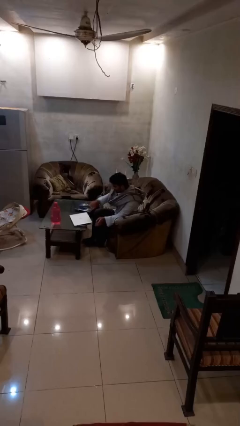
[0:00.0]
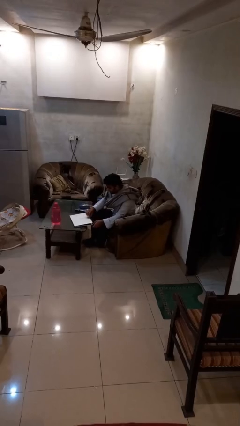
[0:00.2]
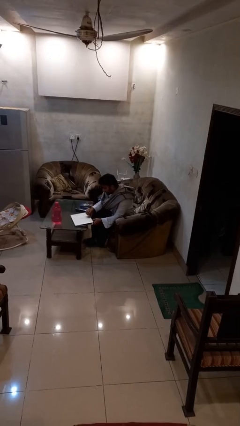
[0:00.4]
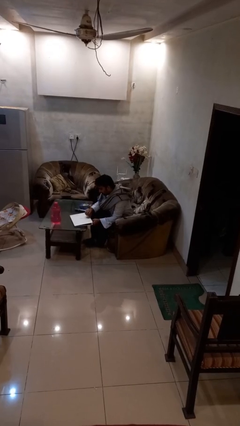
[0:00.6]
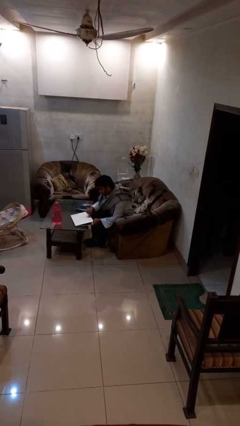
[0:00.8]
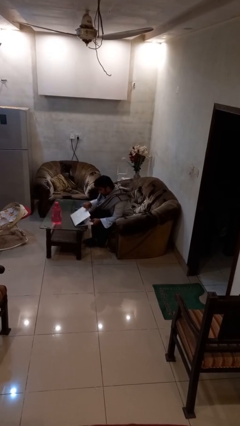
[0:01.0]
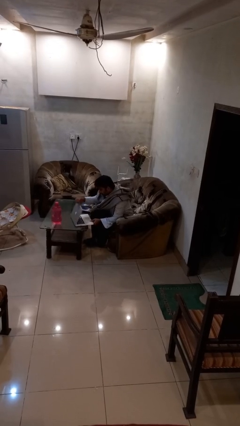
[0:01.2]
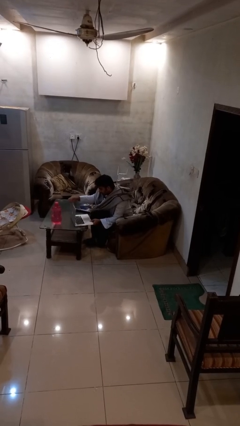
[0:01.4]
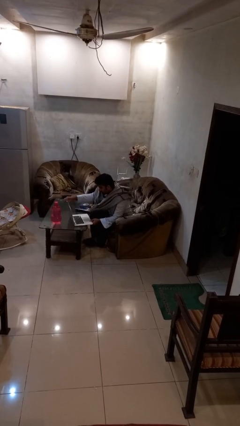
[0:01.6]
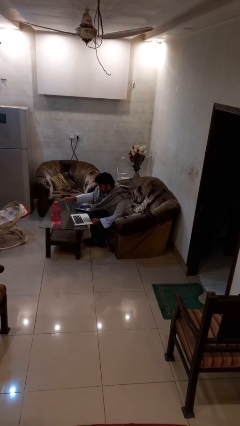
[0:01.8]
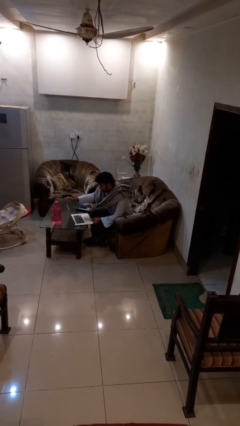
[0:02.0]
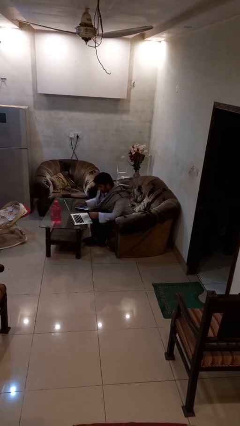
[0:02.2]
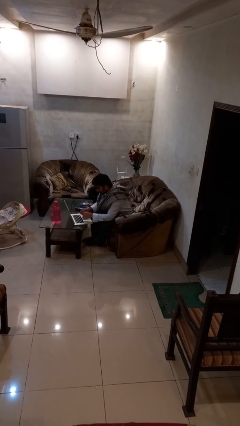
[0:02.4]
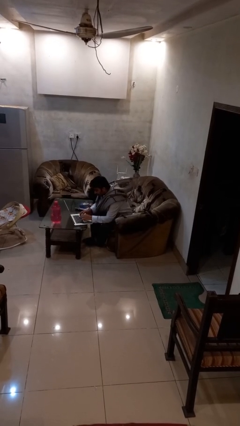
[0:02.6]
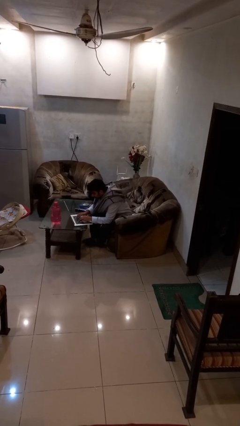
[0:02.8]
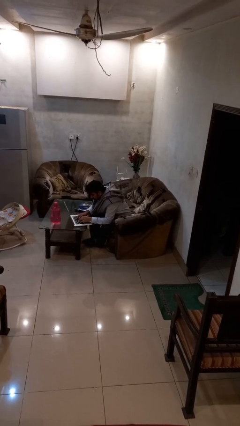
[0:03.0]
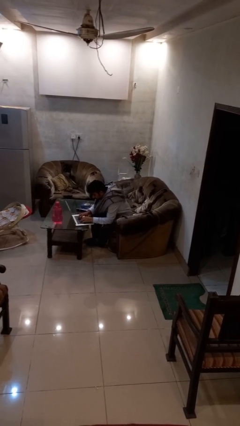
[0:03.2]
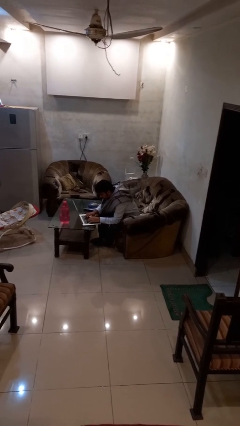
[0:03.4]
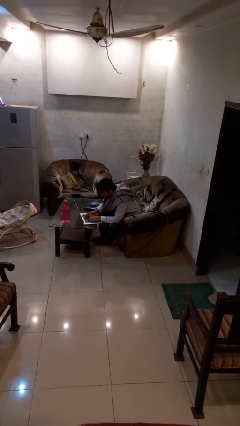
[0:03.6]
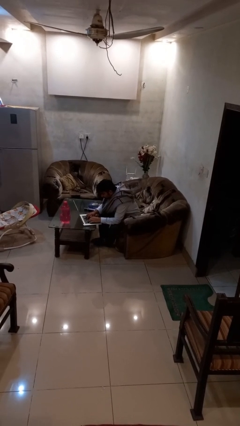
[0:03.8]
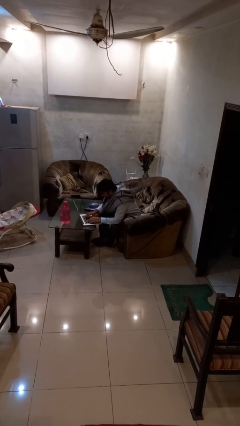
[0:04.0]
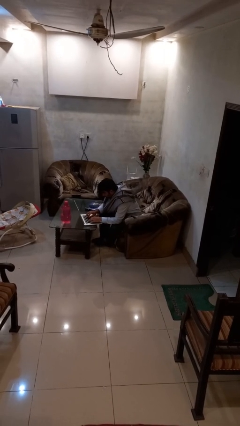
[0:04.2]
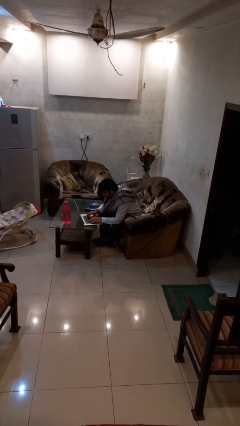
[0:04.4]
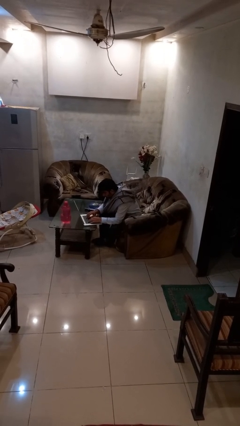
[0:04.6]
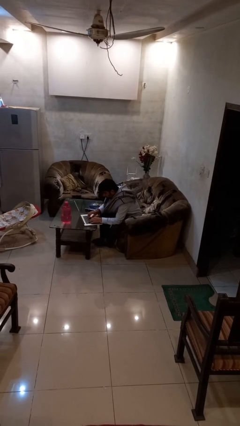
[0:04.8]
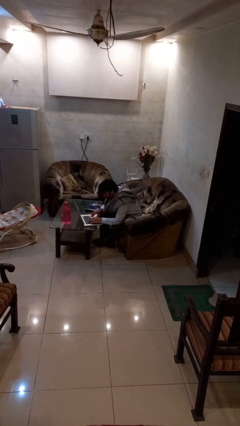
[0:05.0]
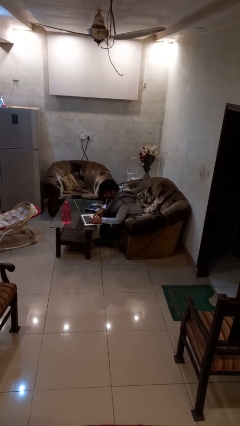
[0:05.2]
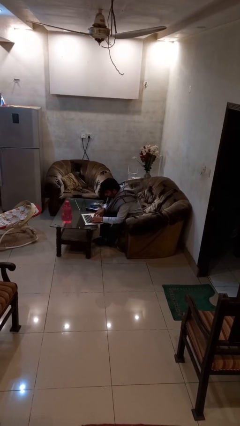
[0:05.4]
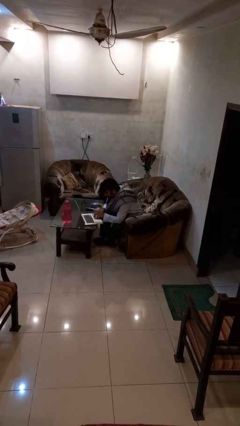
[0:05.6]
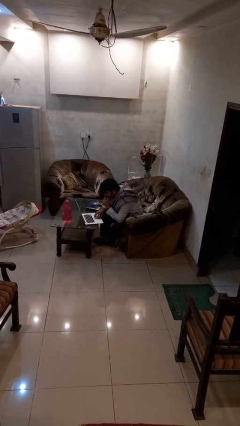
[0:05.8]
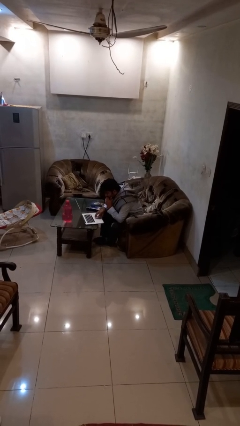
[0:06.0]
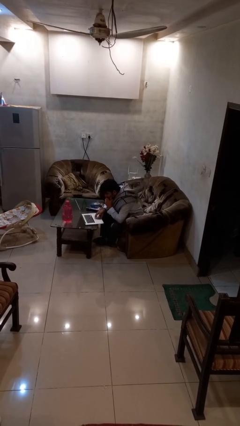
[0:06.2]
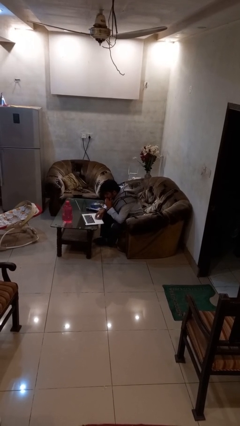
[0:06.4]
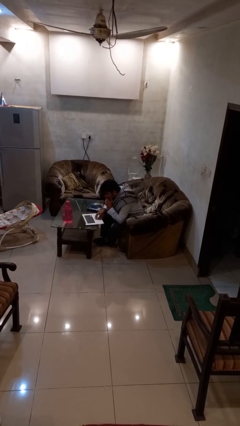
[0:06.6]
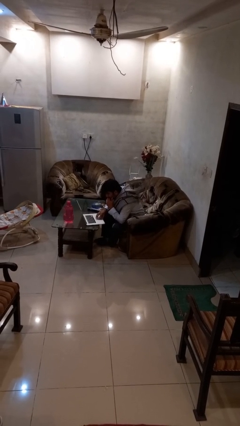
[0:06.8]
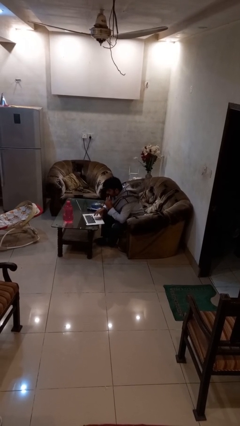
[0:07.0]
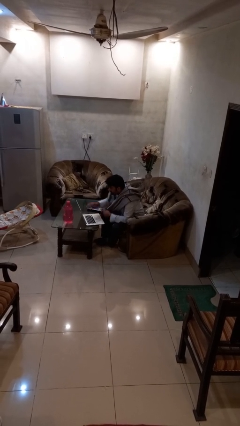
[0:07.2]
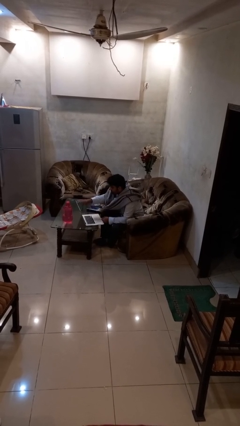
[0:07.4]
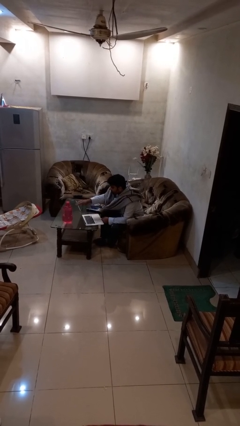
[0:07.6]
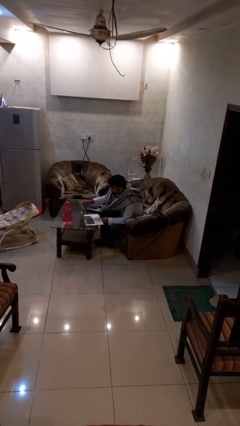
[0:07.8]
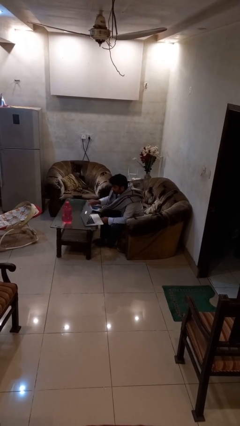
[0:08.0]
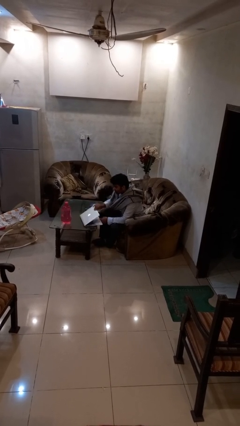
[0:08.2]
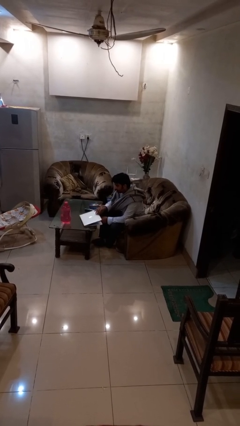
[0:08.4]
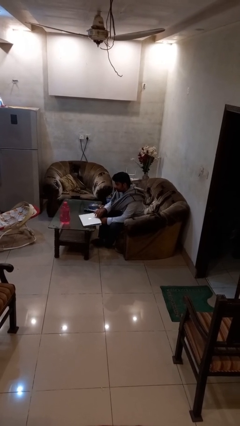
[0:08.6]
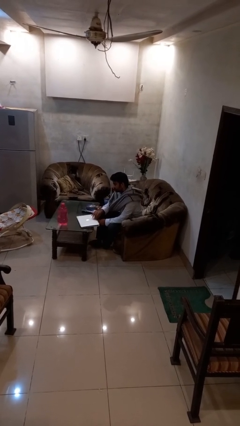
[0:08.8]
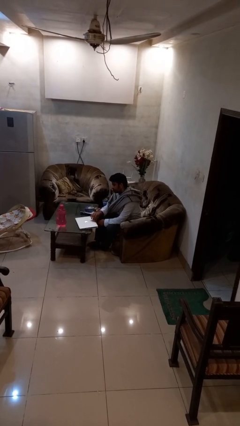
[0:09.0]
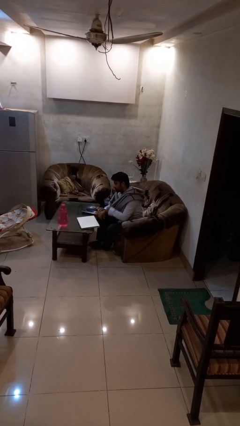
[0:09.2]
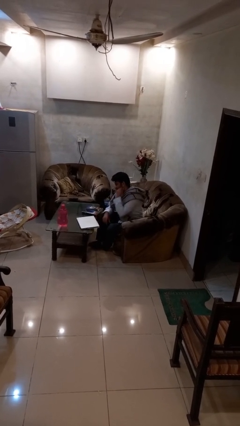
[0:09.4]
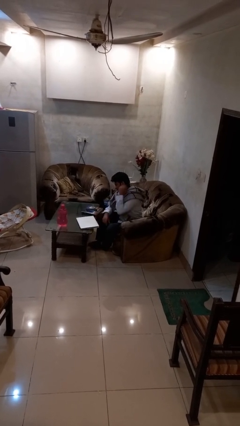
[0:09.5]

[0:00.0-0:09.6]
person interacts with laptop

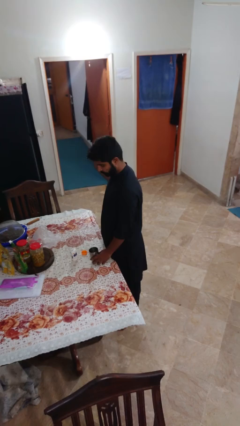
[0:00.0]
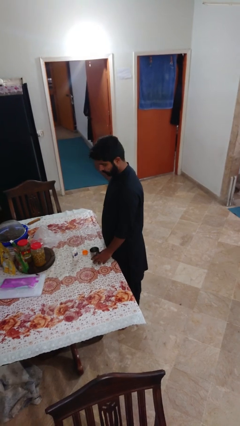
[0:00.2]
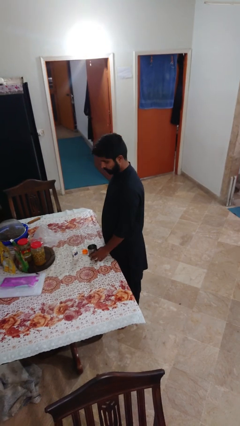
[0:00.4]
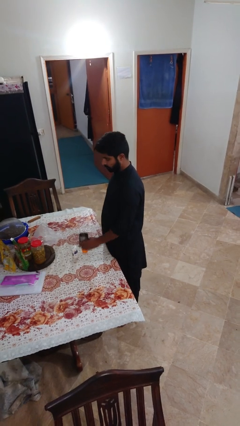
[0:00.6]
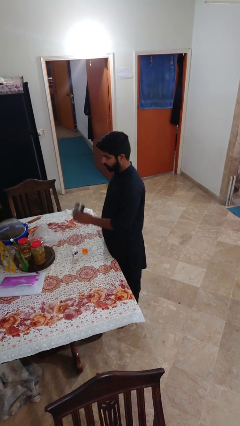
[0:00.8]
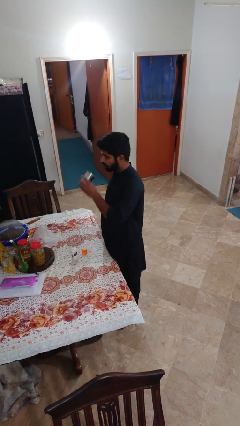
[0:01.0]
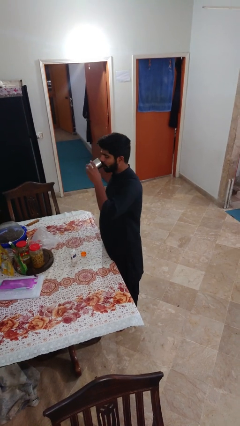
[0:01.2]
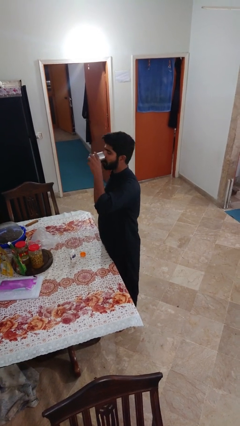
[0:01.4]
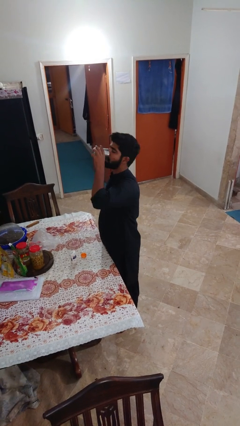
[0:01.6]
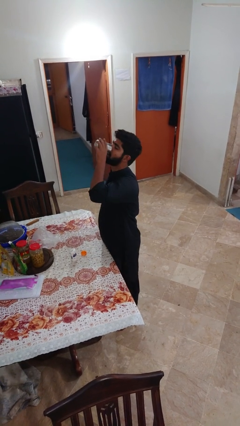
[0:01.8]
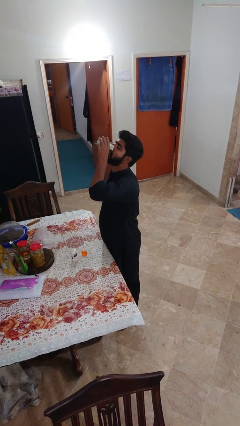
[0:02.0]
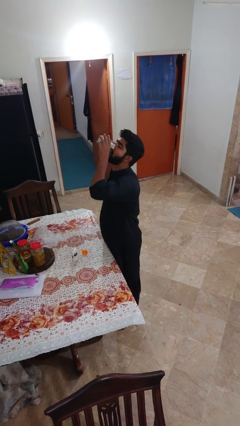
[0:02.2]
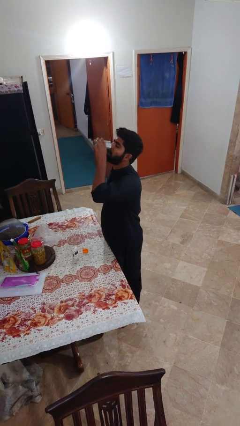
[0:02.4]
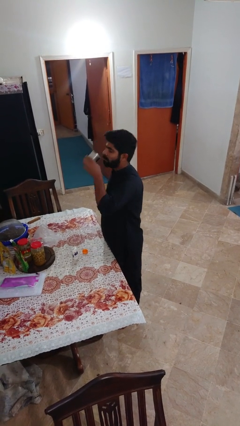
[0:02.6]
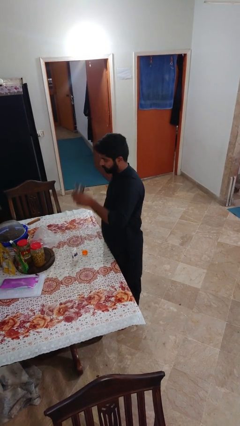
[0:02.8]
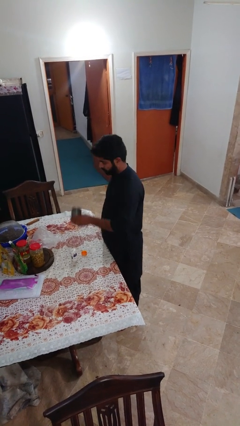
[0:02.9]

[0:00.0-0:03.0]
person drinks from cup

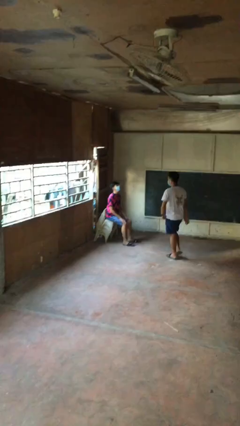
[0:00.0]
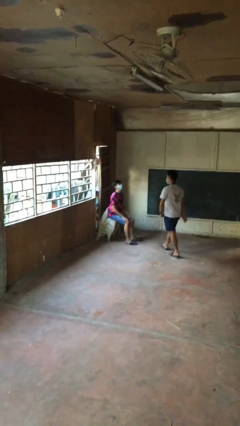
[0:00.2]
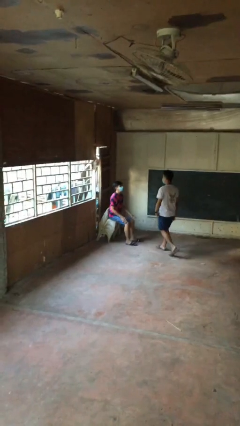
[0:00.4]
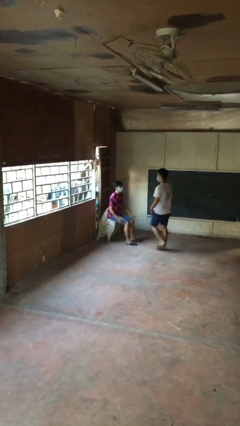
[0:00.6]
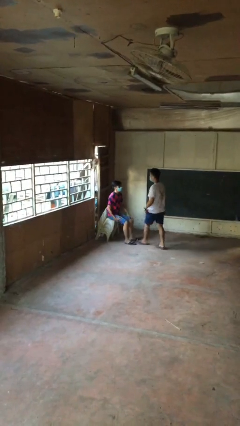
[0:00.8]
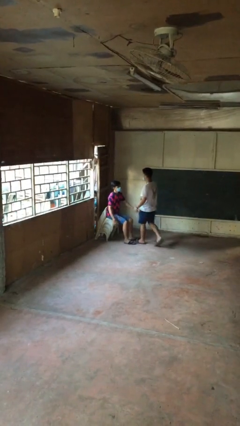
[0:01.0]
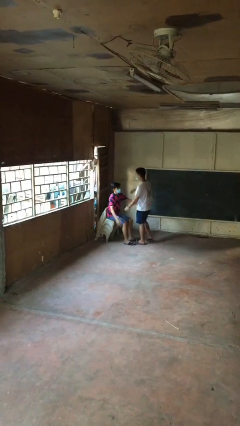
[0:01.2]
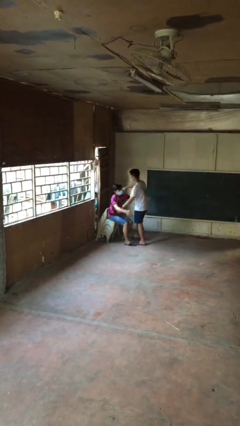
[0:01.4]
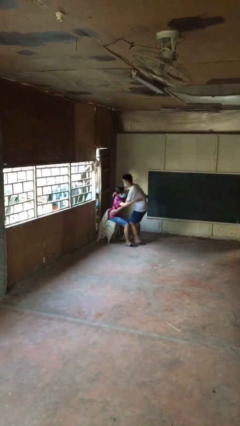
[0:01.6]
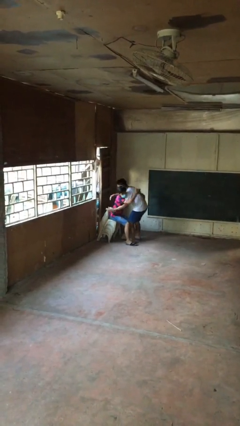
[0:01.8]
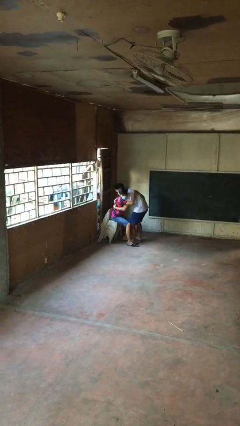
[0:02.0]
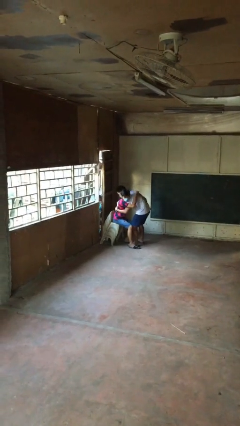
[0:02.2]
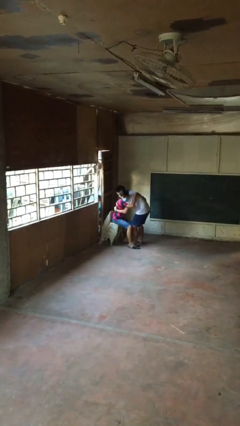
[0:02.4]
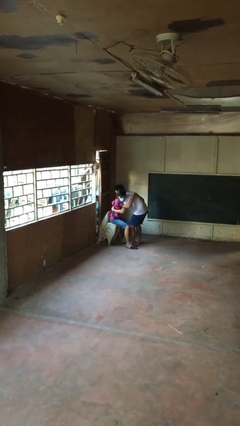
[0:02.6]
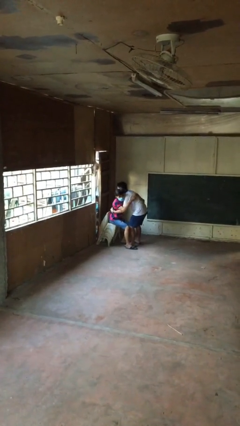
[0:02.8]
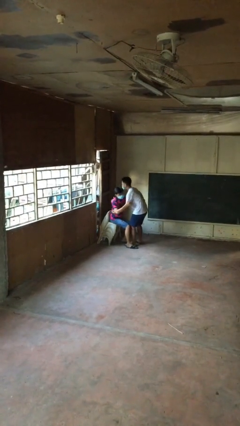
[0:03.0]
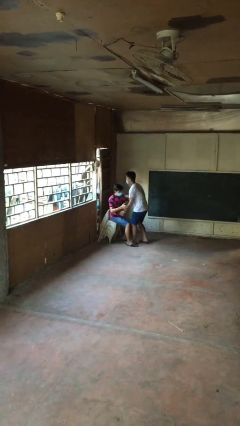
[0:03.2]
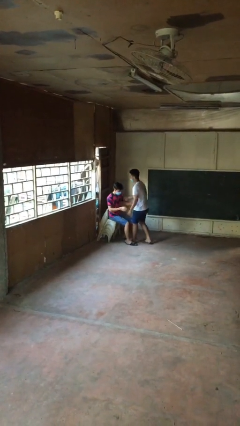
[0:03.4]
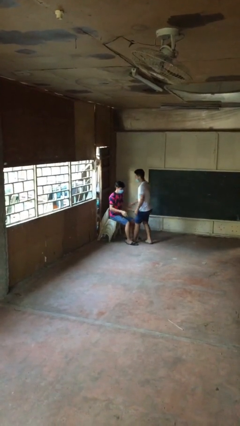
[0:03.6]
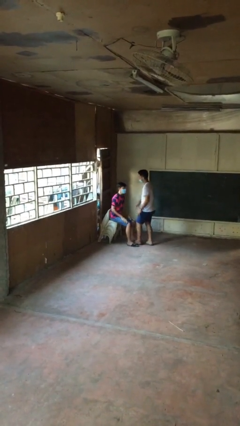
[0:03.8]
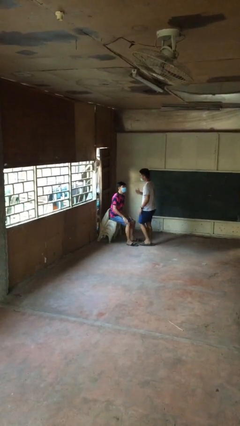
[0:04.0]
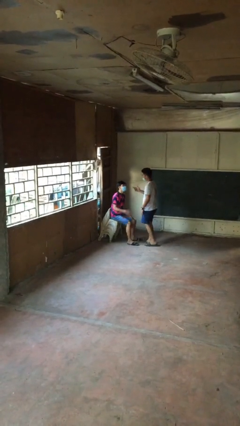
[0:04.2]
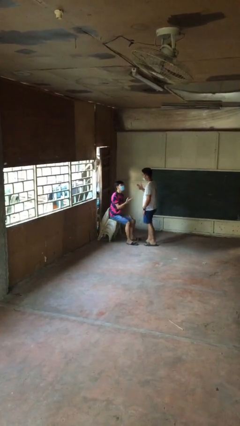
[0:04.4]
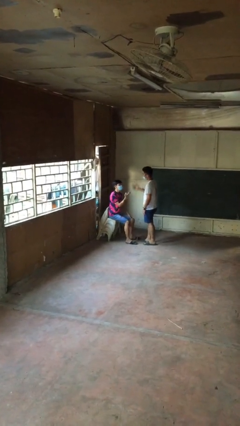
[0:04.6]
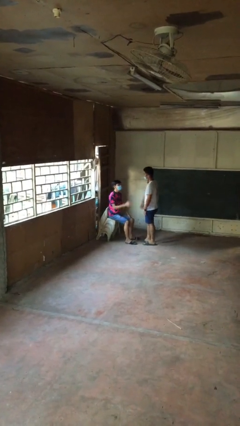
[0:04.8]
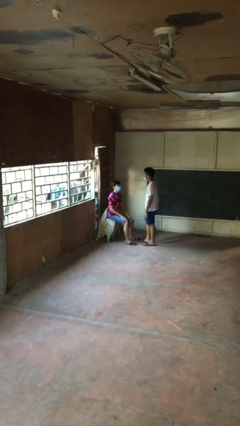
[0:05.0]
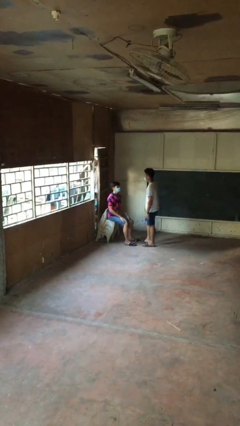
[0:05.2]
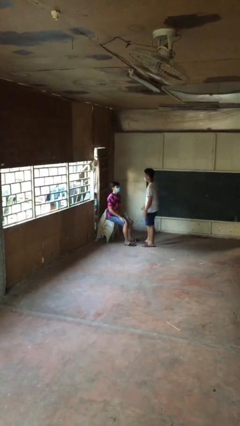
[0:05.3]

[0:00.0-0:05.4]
person embraces person
